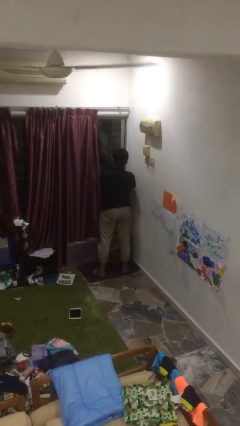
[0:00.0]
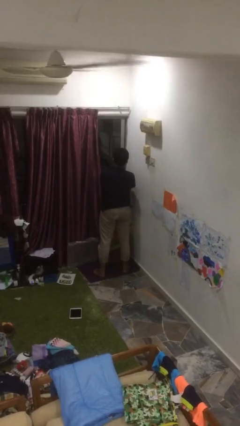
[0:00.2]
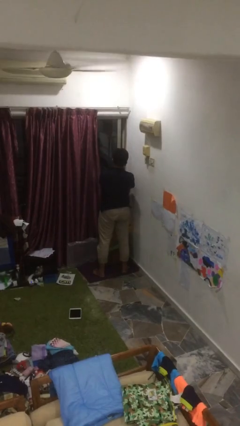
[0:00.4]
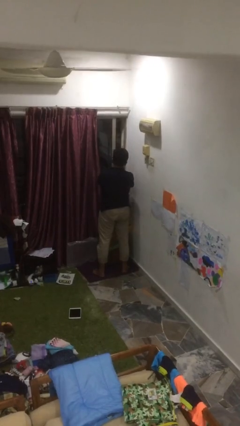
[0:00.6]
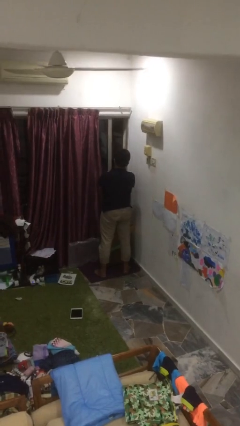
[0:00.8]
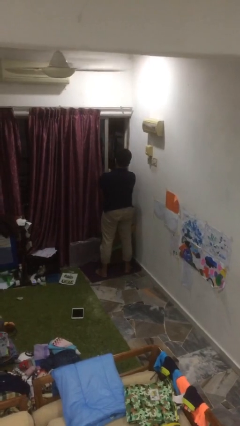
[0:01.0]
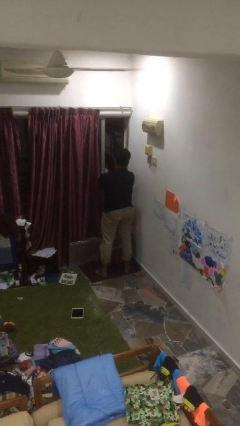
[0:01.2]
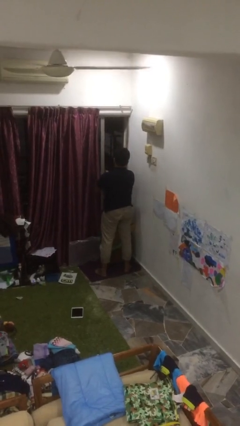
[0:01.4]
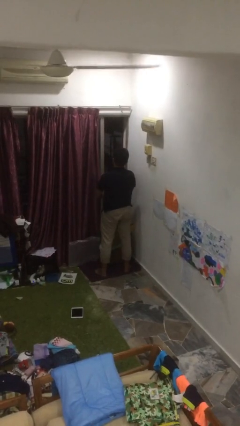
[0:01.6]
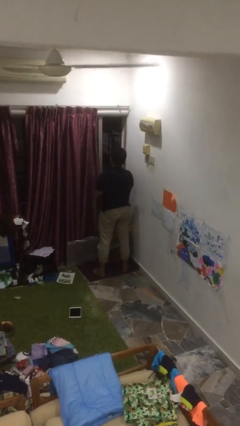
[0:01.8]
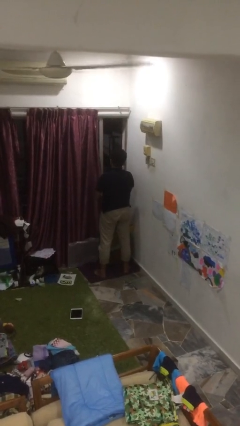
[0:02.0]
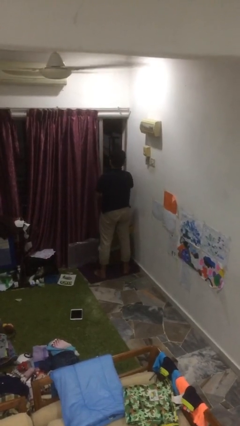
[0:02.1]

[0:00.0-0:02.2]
person opens home window

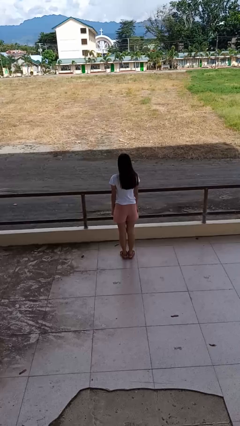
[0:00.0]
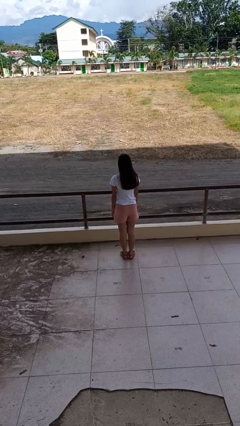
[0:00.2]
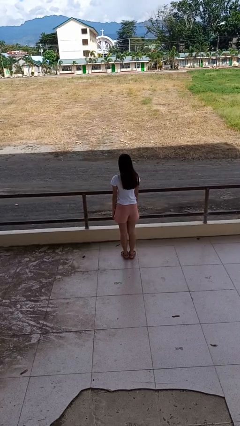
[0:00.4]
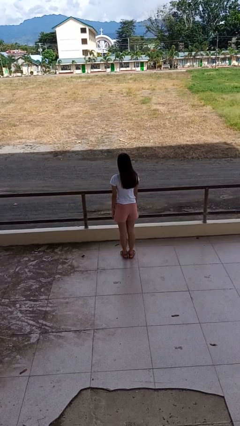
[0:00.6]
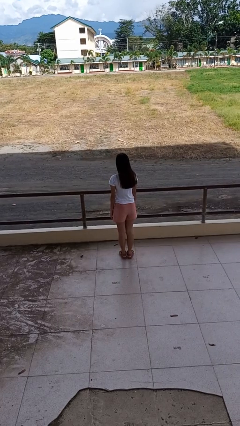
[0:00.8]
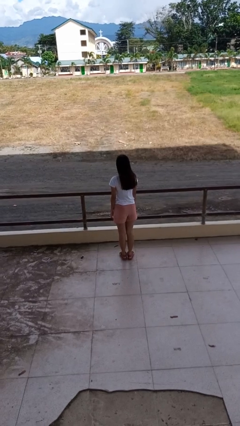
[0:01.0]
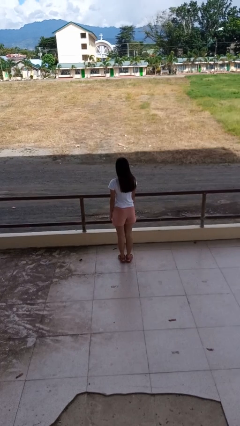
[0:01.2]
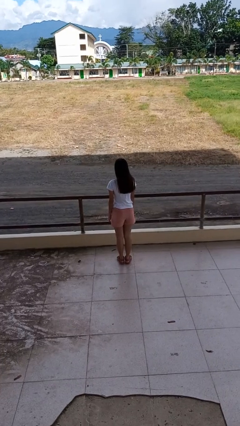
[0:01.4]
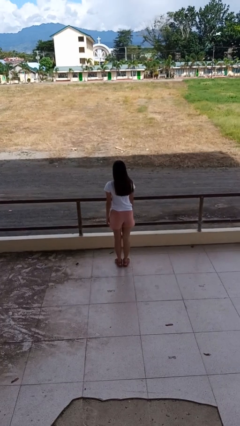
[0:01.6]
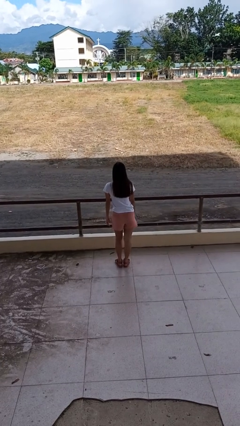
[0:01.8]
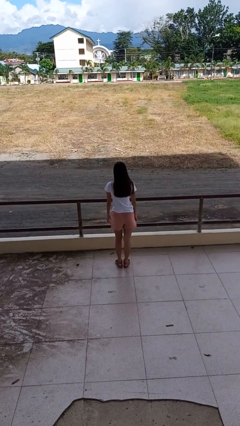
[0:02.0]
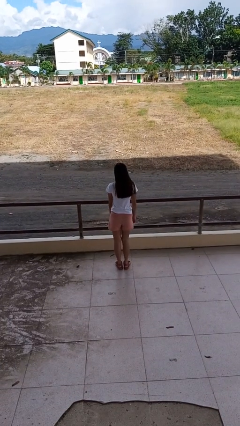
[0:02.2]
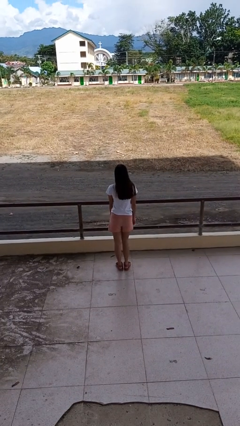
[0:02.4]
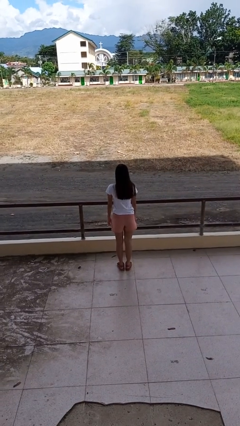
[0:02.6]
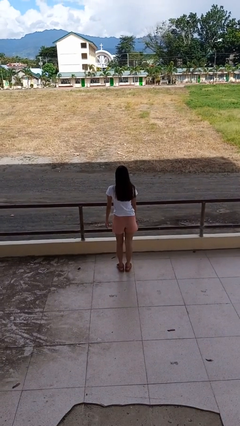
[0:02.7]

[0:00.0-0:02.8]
person wiggles hips

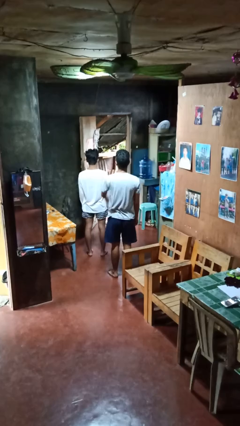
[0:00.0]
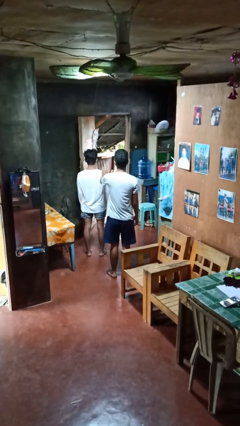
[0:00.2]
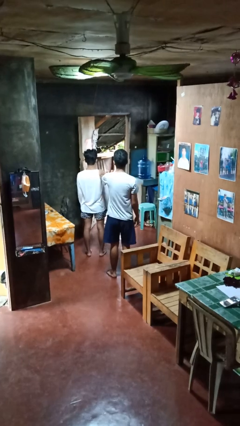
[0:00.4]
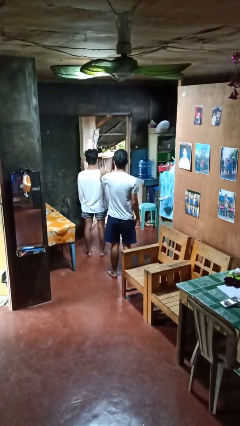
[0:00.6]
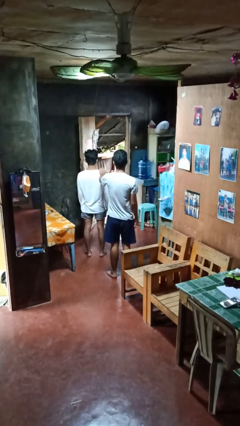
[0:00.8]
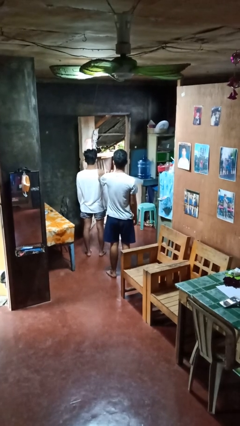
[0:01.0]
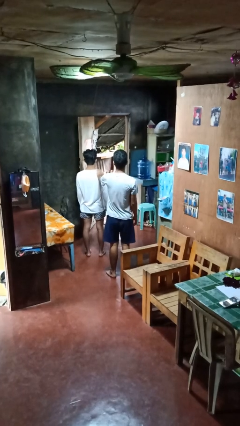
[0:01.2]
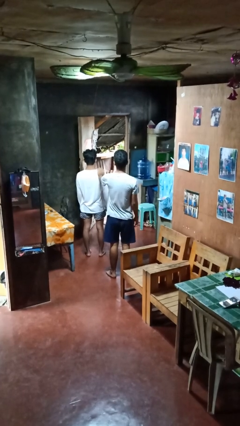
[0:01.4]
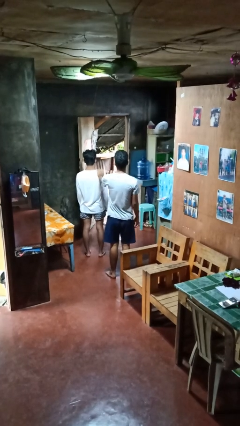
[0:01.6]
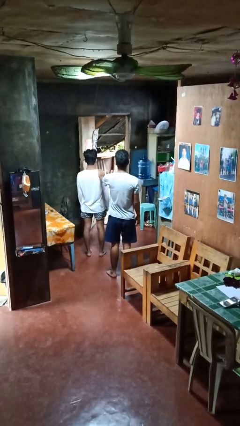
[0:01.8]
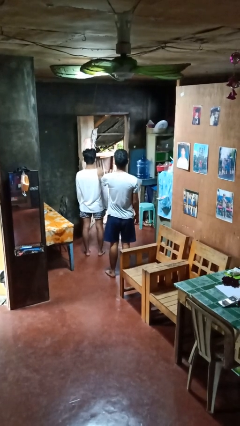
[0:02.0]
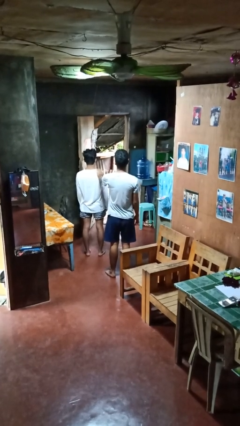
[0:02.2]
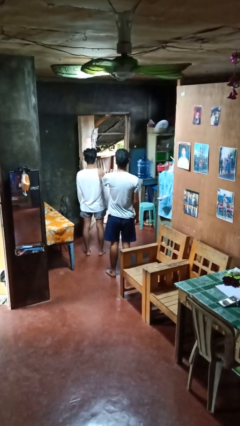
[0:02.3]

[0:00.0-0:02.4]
person pounds shoulders of person

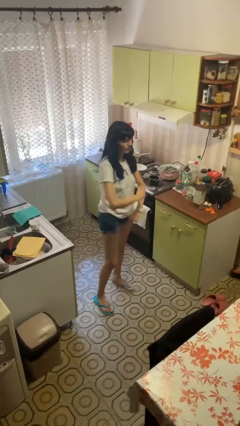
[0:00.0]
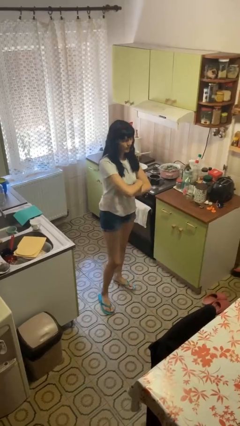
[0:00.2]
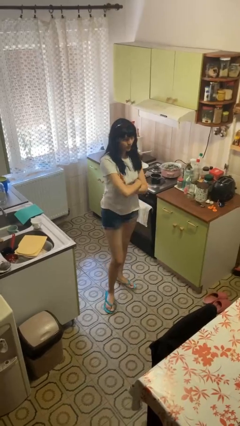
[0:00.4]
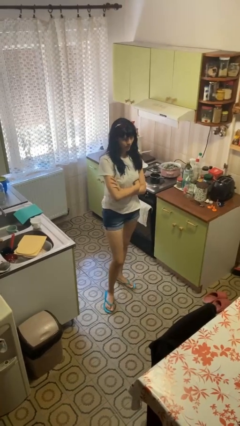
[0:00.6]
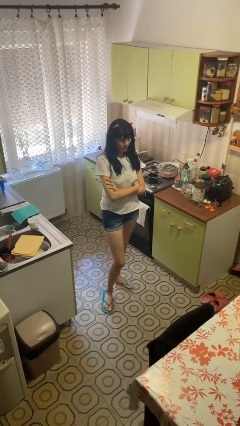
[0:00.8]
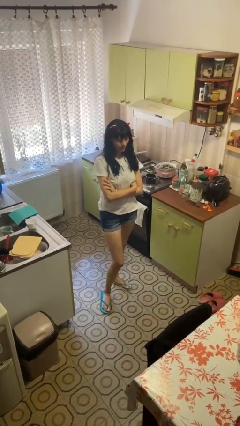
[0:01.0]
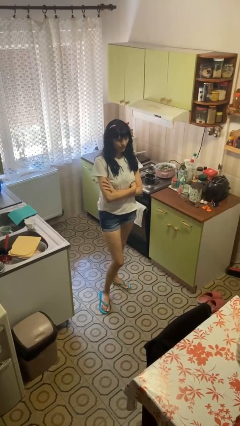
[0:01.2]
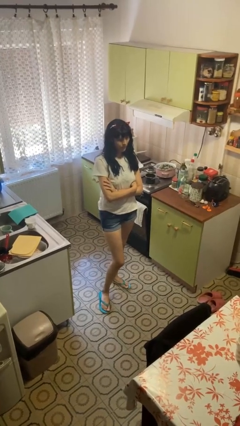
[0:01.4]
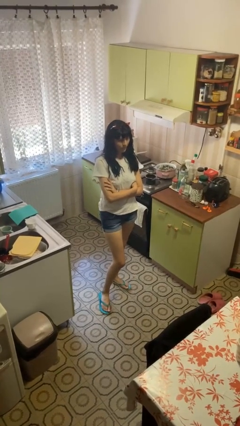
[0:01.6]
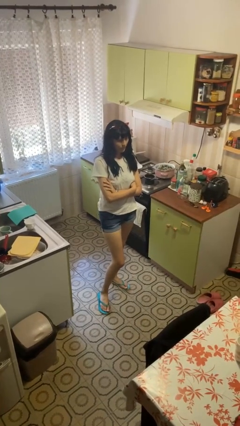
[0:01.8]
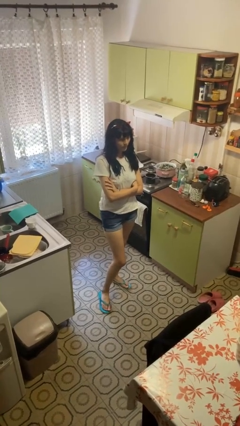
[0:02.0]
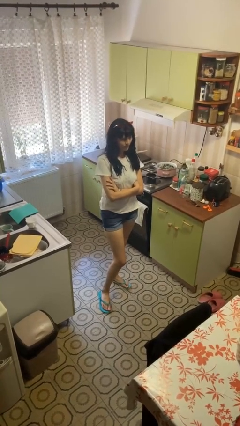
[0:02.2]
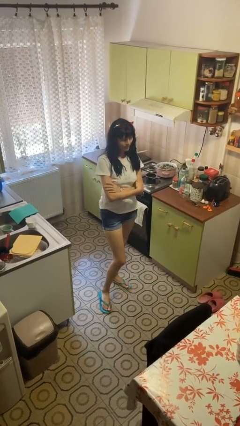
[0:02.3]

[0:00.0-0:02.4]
person crosses arms

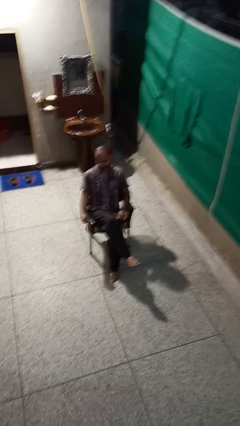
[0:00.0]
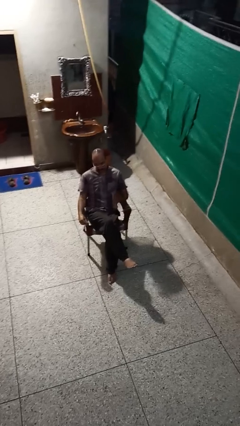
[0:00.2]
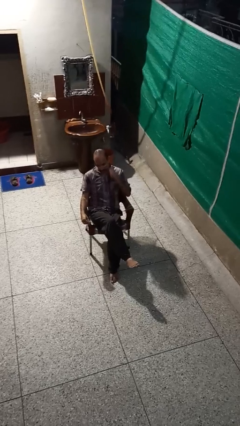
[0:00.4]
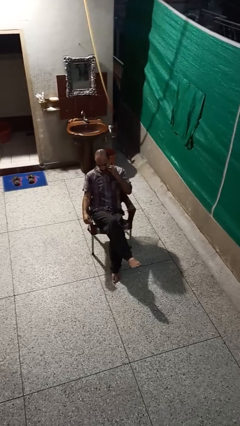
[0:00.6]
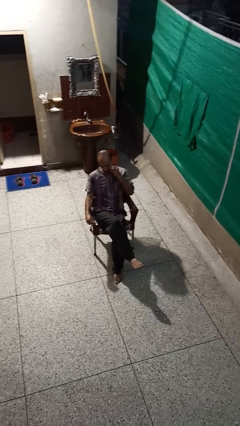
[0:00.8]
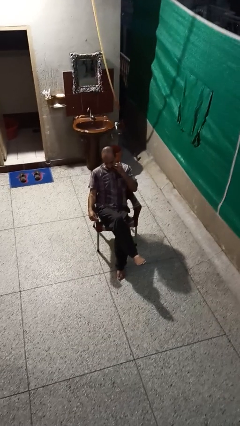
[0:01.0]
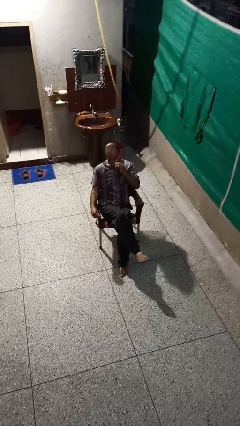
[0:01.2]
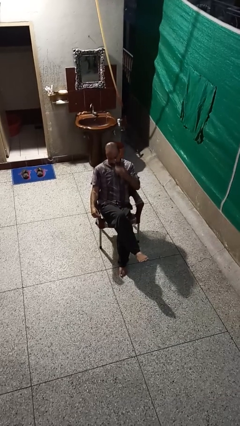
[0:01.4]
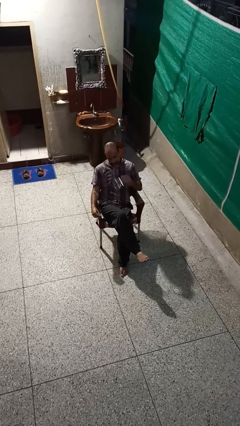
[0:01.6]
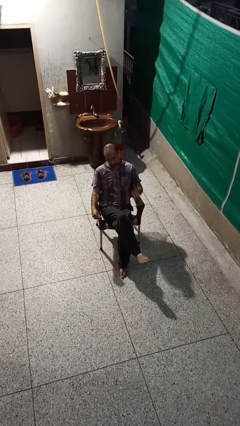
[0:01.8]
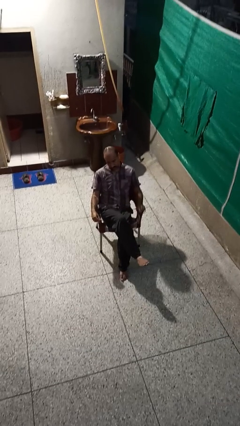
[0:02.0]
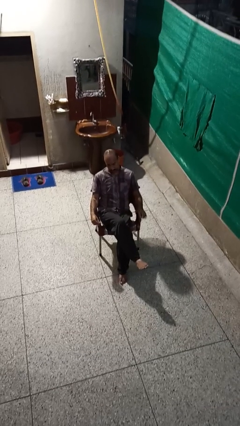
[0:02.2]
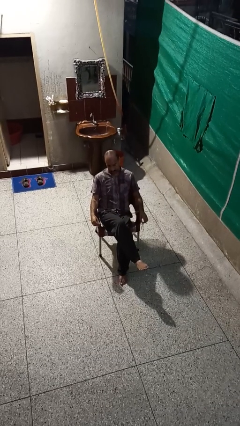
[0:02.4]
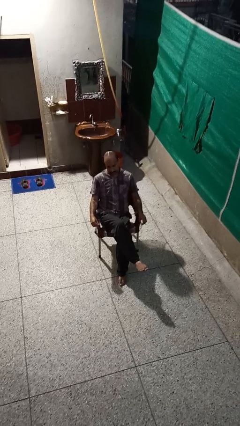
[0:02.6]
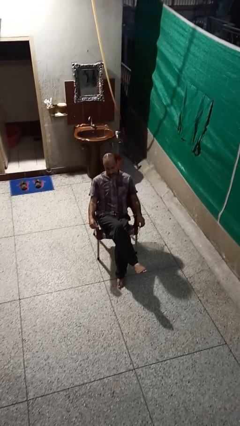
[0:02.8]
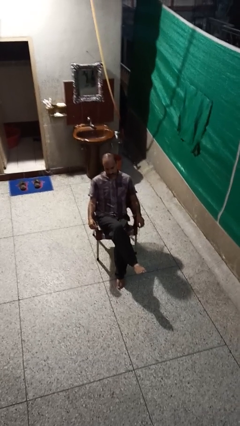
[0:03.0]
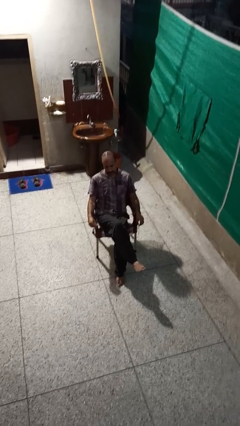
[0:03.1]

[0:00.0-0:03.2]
person takes off glasses

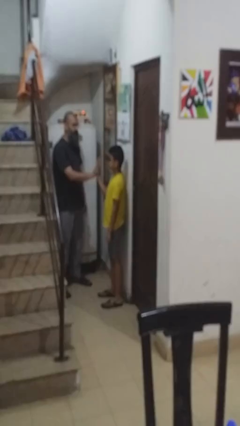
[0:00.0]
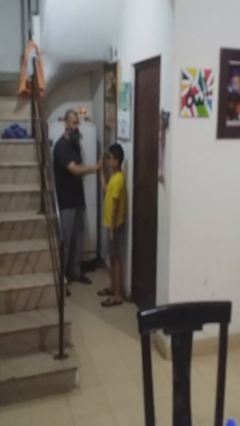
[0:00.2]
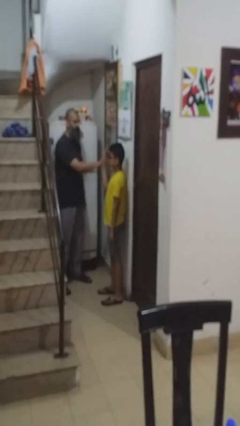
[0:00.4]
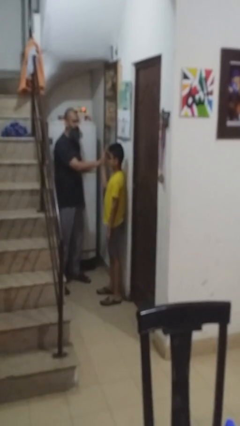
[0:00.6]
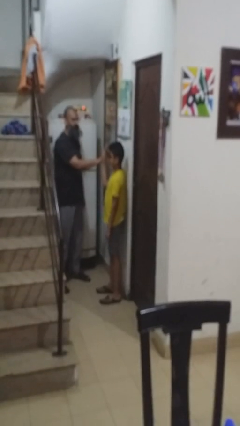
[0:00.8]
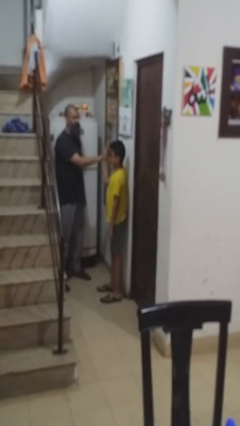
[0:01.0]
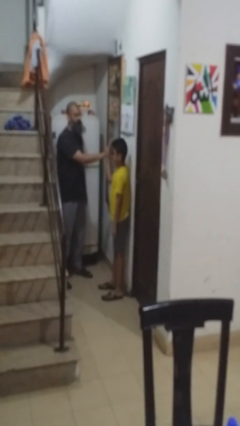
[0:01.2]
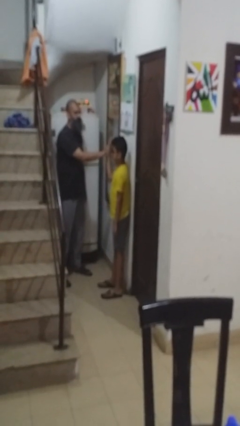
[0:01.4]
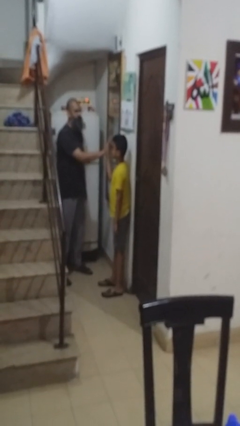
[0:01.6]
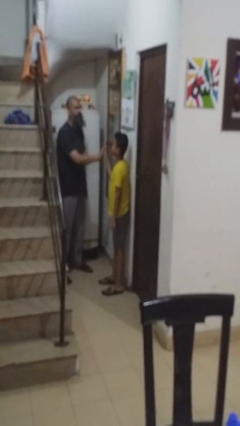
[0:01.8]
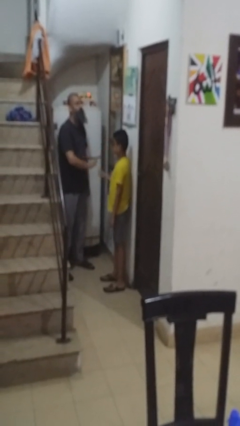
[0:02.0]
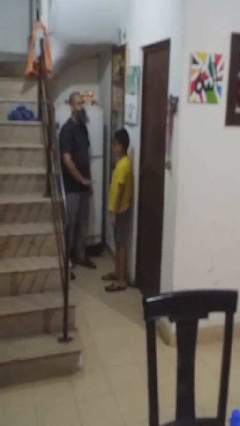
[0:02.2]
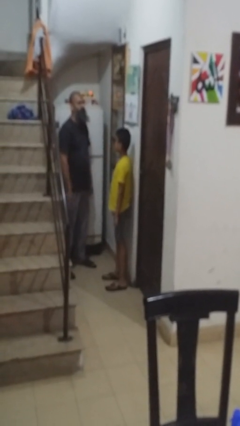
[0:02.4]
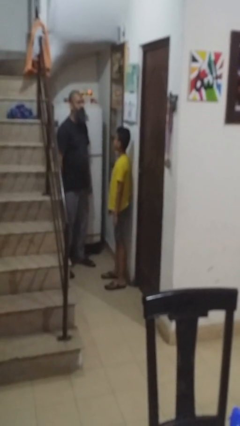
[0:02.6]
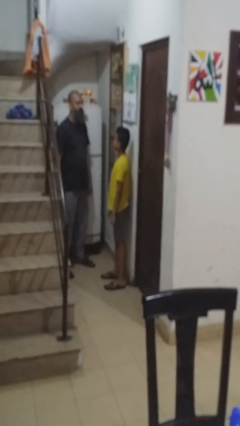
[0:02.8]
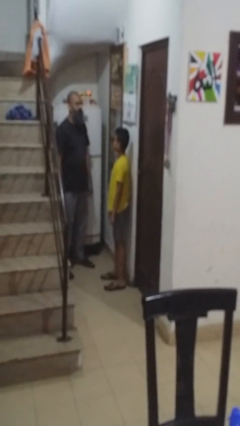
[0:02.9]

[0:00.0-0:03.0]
person highfives hand

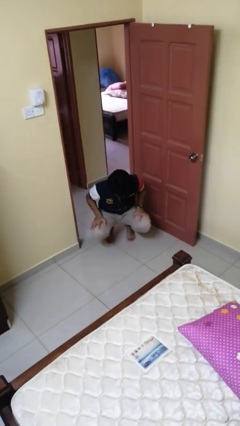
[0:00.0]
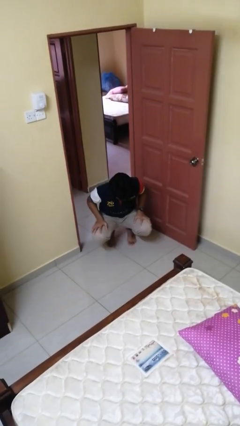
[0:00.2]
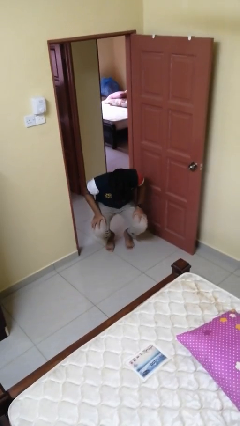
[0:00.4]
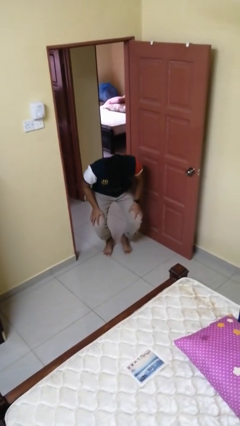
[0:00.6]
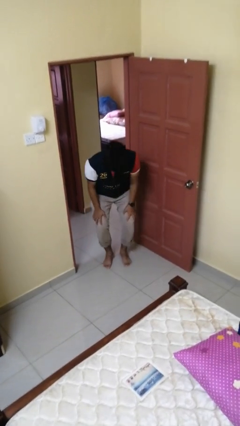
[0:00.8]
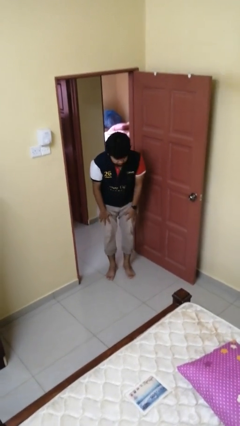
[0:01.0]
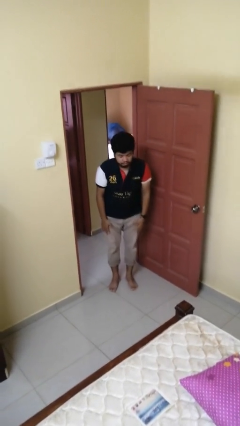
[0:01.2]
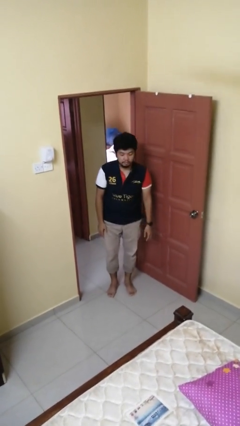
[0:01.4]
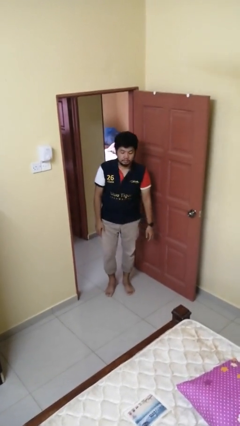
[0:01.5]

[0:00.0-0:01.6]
person stands up
